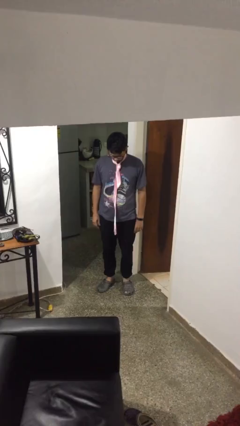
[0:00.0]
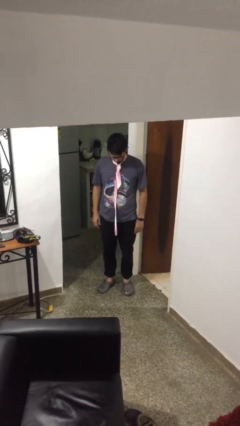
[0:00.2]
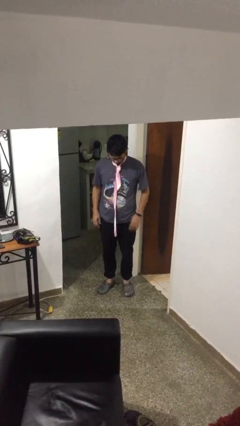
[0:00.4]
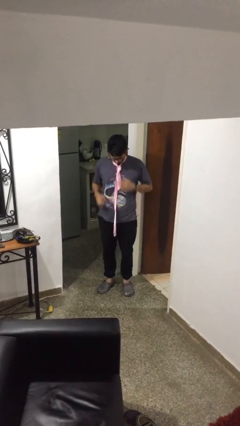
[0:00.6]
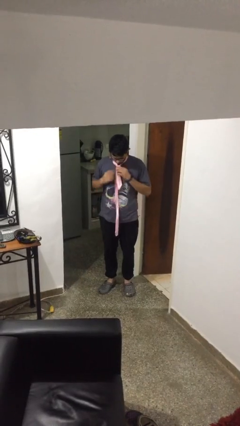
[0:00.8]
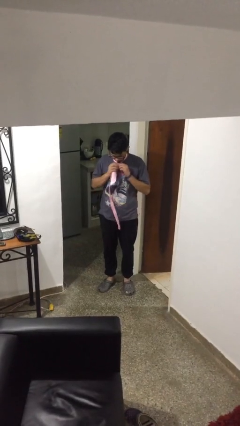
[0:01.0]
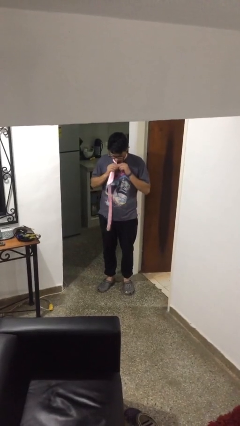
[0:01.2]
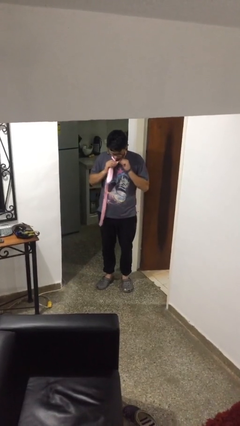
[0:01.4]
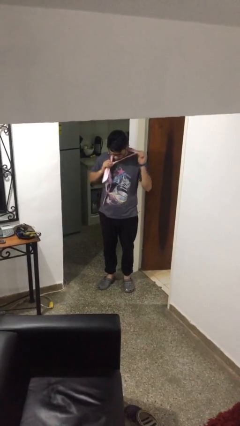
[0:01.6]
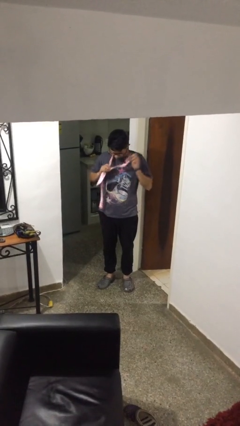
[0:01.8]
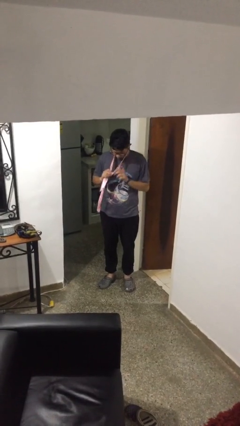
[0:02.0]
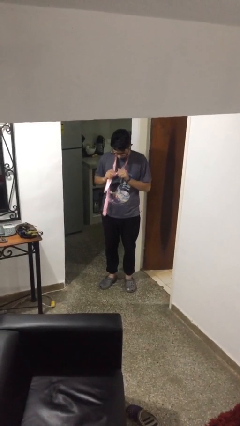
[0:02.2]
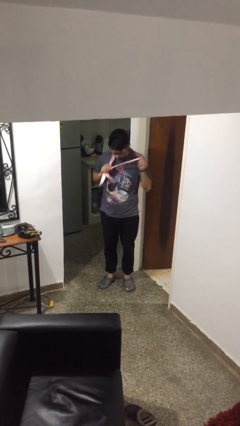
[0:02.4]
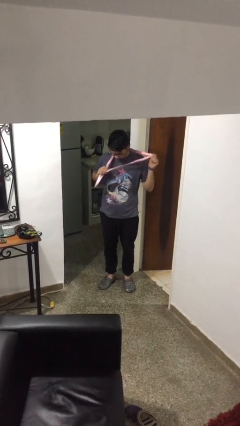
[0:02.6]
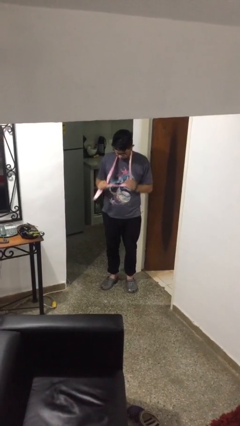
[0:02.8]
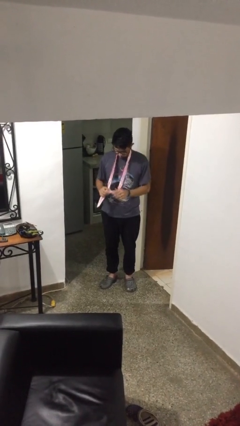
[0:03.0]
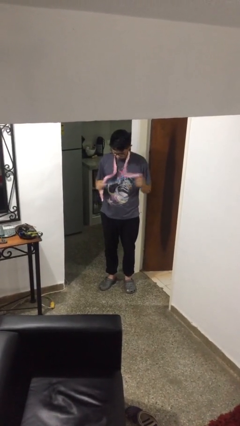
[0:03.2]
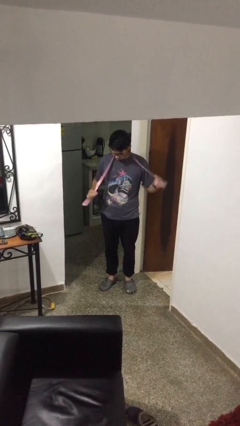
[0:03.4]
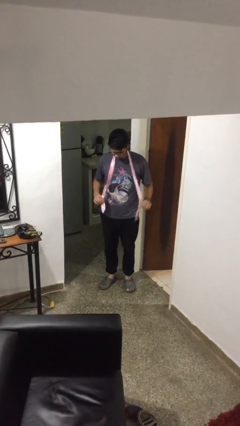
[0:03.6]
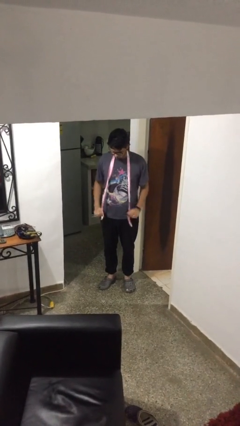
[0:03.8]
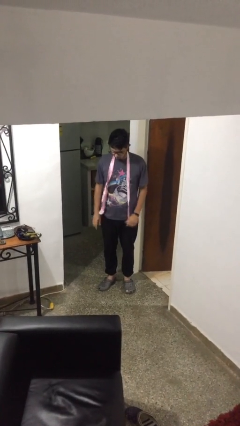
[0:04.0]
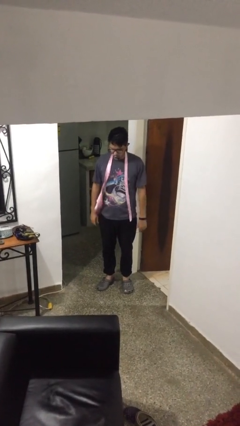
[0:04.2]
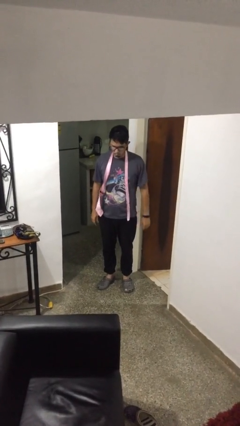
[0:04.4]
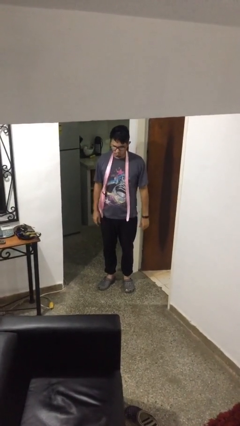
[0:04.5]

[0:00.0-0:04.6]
person takes off necktie

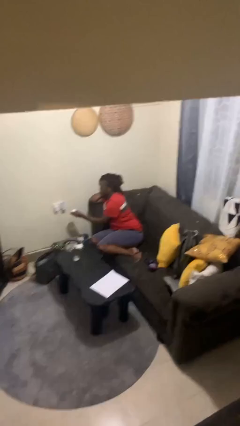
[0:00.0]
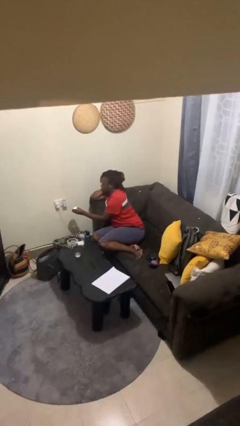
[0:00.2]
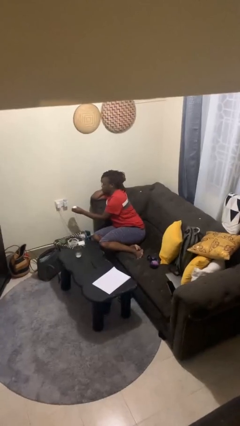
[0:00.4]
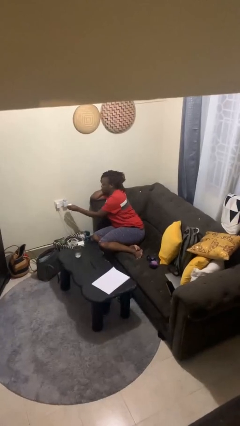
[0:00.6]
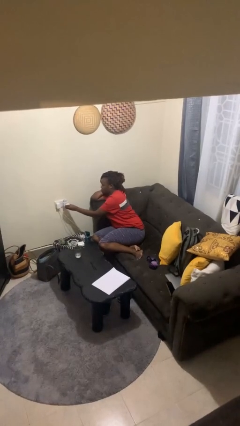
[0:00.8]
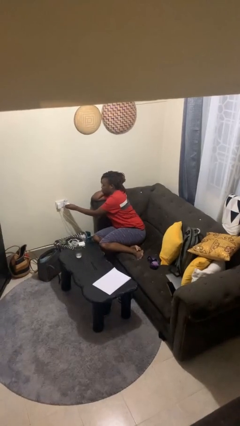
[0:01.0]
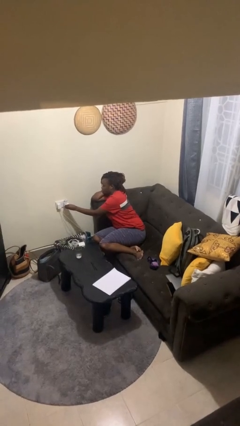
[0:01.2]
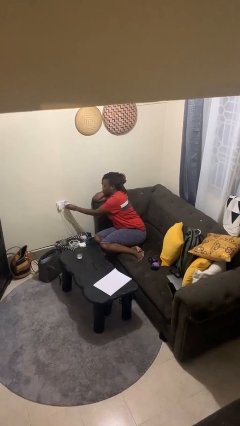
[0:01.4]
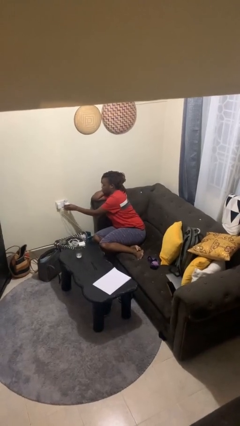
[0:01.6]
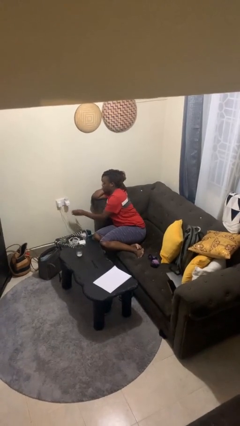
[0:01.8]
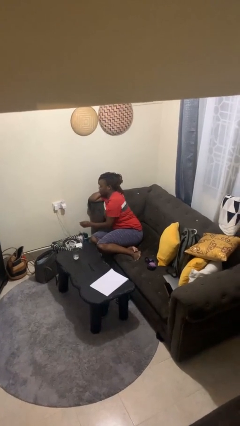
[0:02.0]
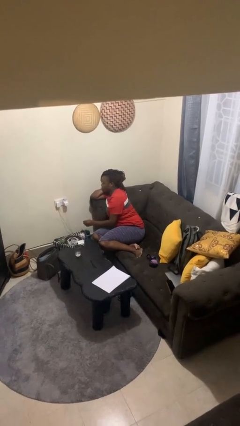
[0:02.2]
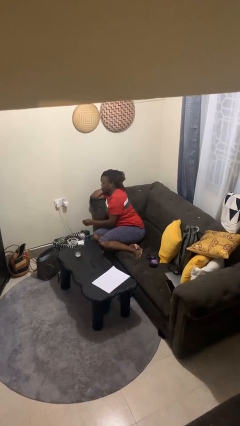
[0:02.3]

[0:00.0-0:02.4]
person plugs into electrical socket

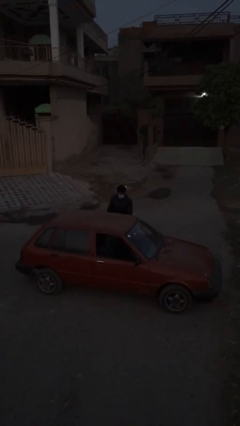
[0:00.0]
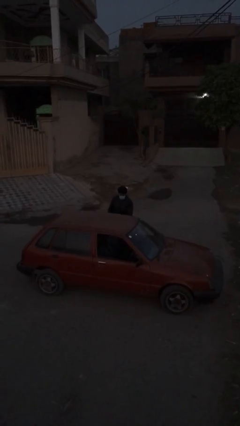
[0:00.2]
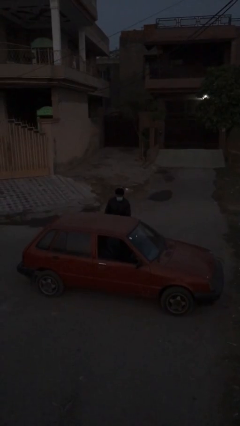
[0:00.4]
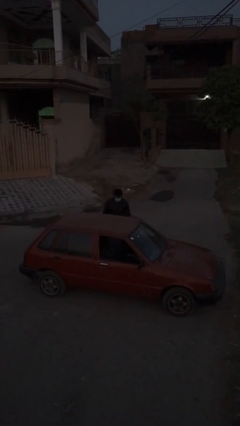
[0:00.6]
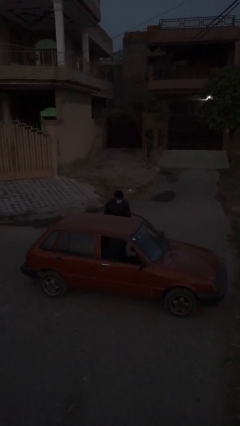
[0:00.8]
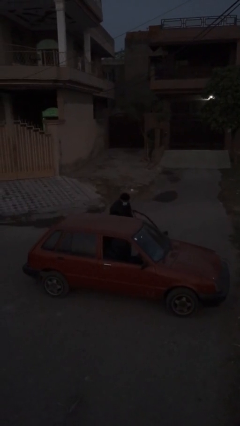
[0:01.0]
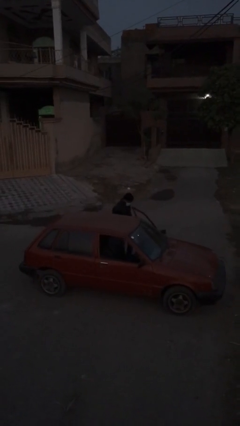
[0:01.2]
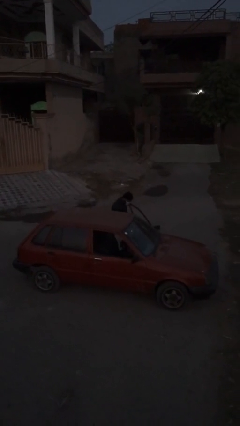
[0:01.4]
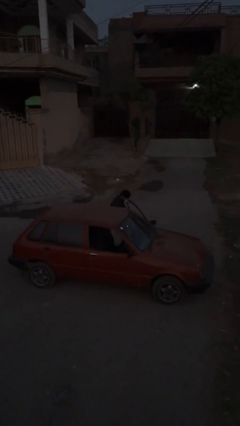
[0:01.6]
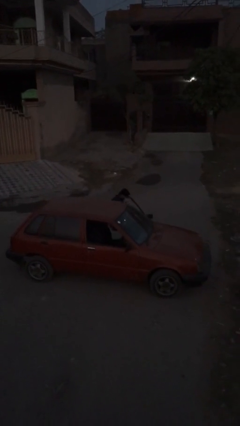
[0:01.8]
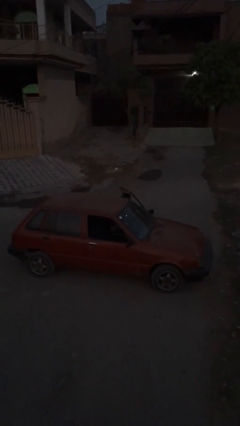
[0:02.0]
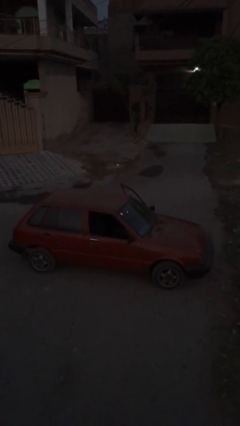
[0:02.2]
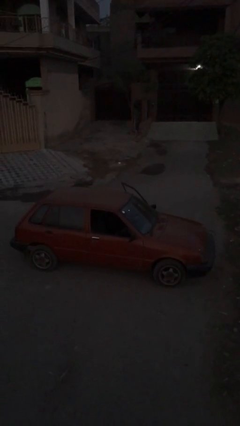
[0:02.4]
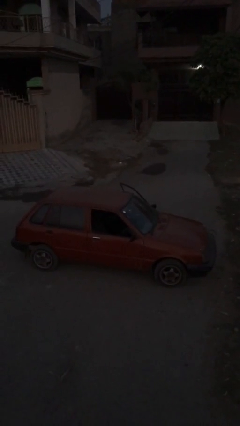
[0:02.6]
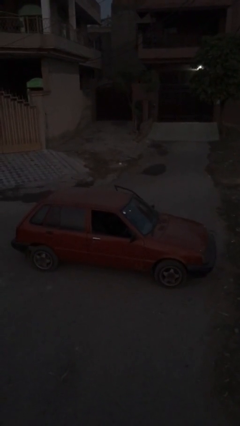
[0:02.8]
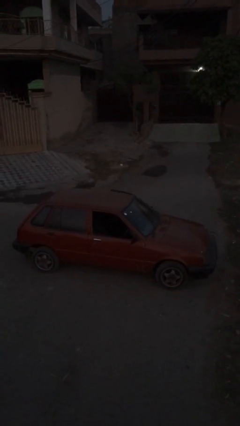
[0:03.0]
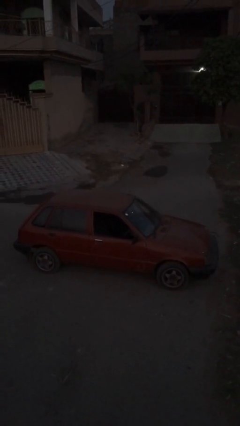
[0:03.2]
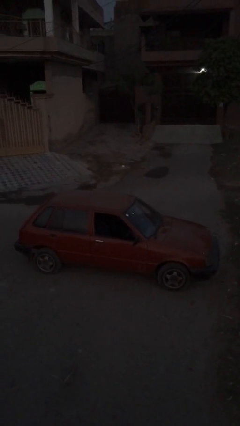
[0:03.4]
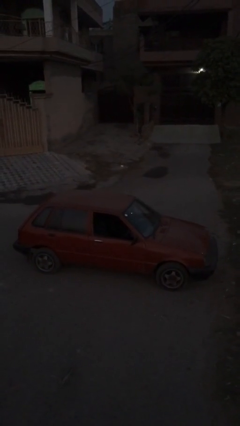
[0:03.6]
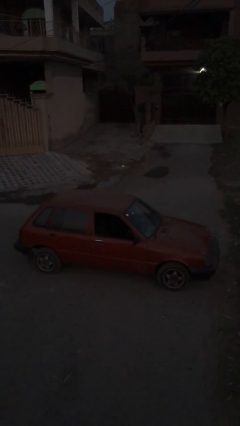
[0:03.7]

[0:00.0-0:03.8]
person enters car

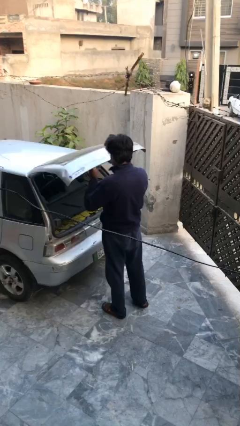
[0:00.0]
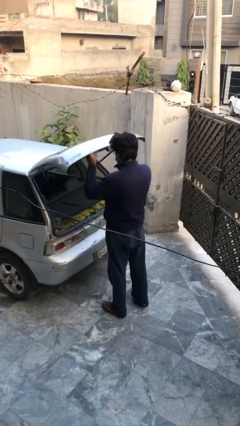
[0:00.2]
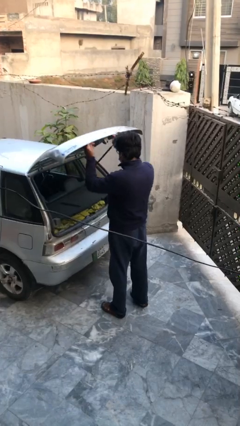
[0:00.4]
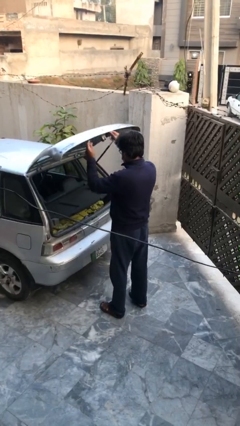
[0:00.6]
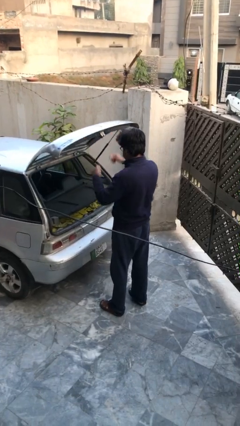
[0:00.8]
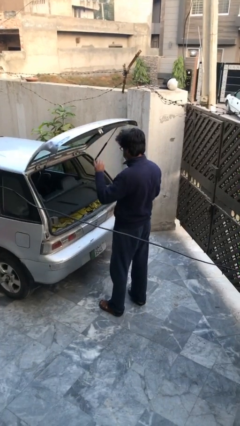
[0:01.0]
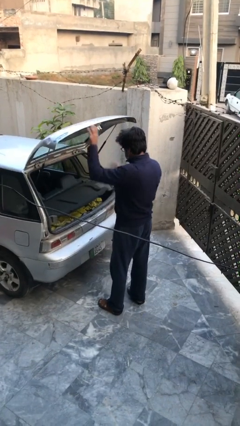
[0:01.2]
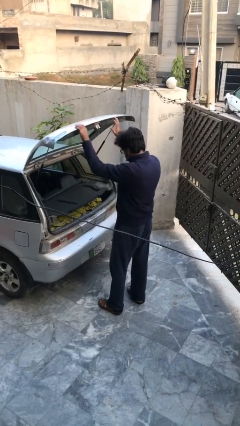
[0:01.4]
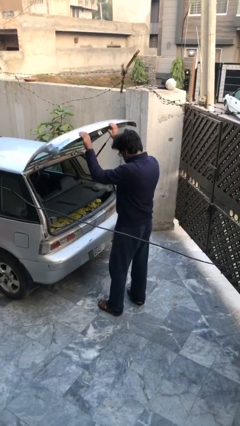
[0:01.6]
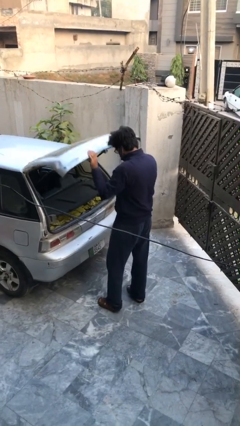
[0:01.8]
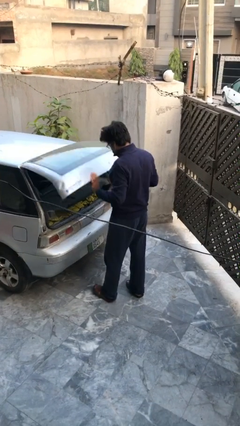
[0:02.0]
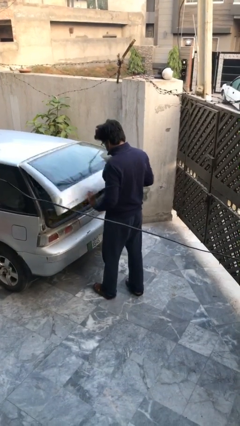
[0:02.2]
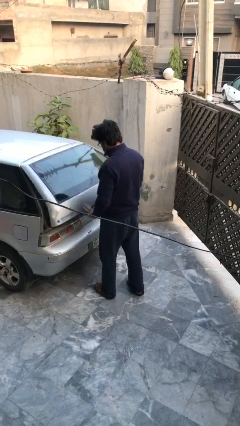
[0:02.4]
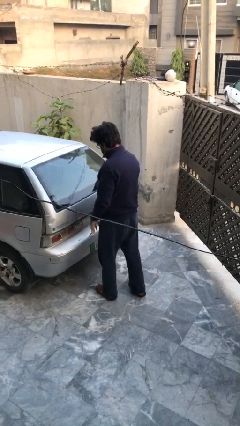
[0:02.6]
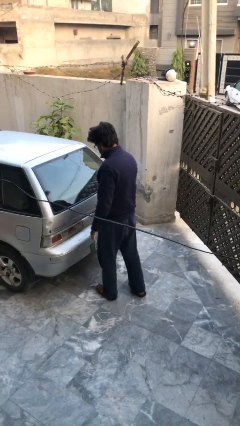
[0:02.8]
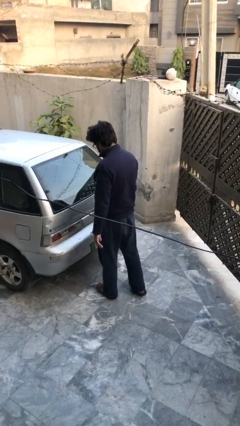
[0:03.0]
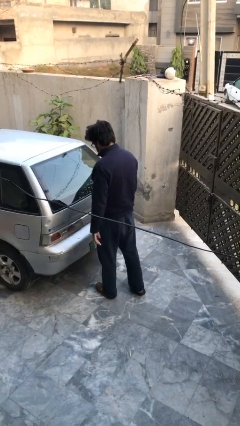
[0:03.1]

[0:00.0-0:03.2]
person closes car trunk

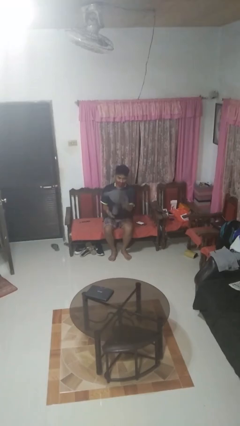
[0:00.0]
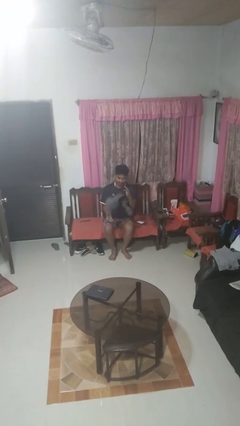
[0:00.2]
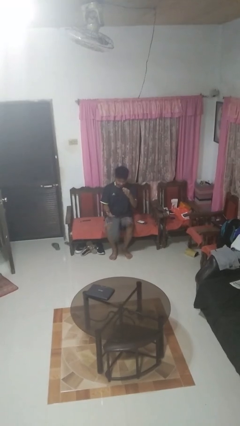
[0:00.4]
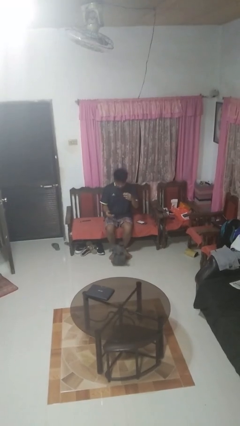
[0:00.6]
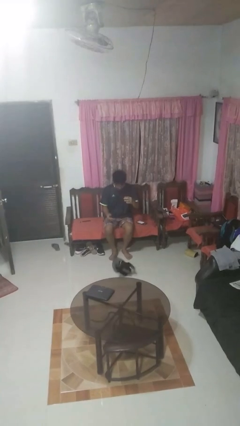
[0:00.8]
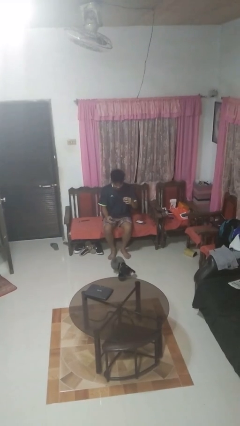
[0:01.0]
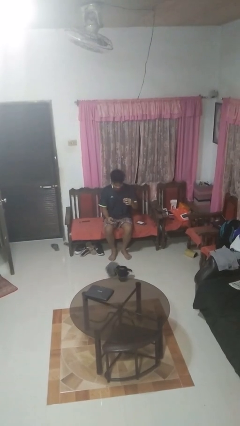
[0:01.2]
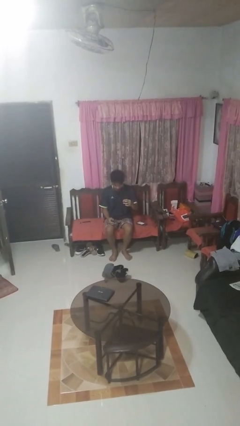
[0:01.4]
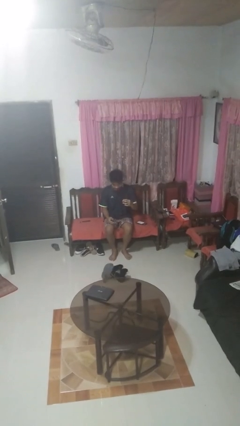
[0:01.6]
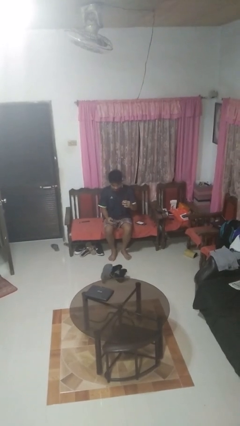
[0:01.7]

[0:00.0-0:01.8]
person drops object

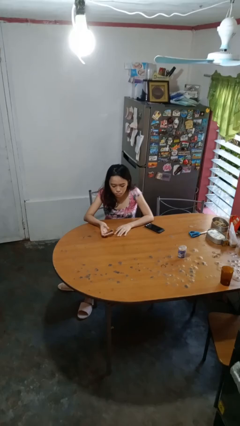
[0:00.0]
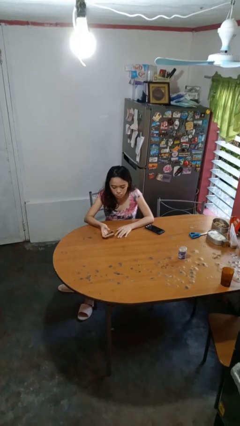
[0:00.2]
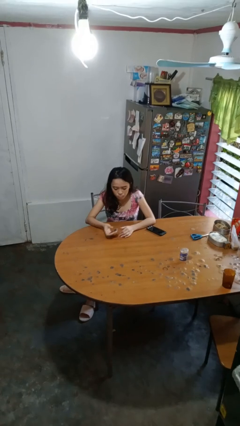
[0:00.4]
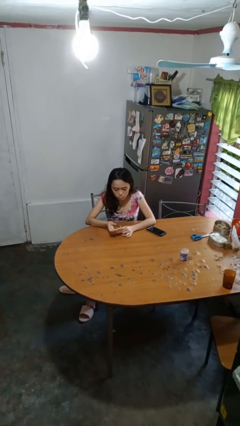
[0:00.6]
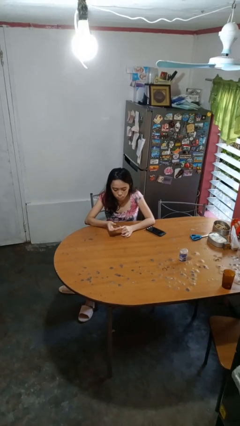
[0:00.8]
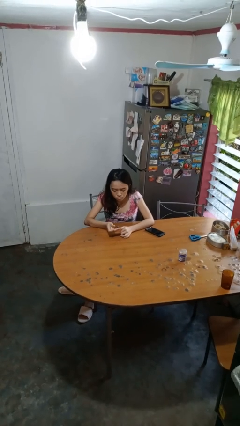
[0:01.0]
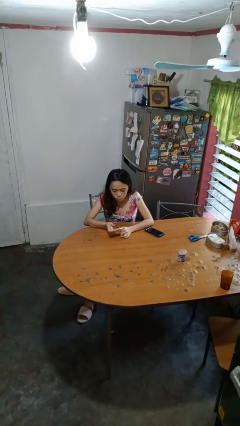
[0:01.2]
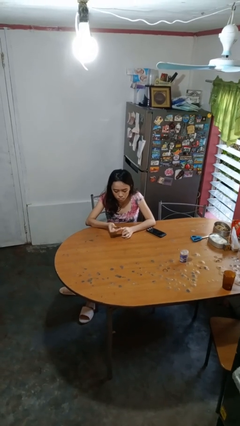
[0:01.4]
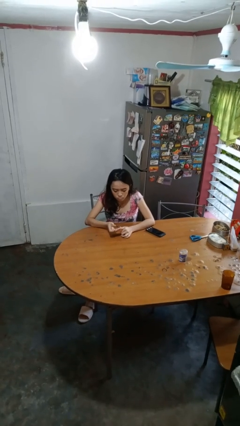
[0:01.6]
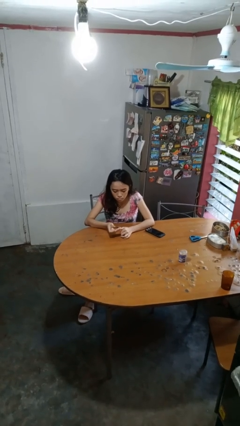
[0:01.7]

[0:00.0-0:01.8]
person clips fingernails
